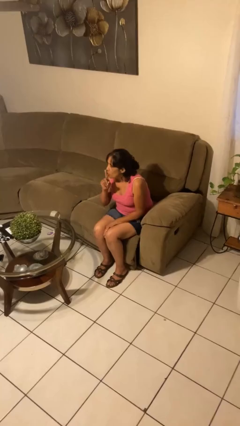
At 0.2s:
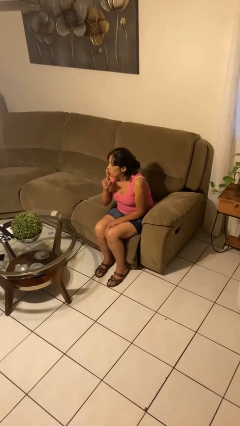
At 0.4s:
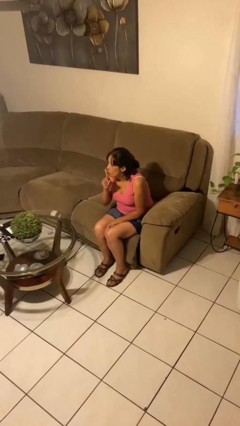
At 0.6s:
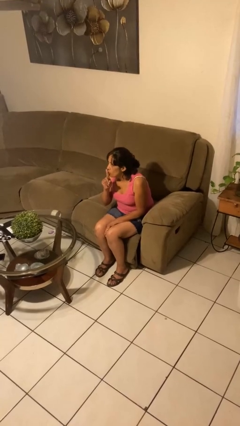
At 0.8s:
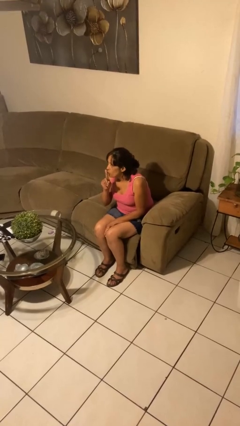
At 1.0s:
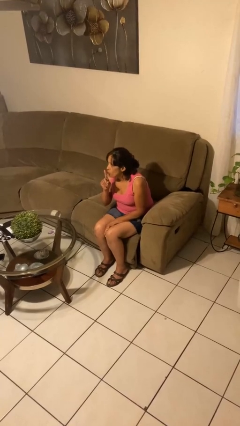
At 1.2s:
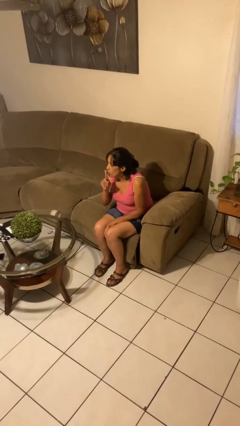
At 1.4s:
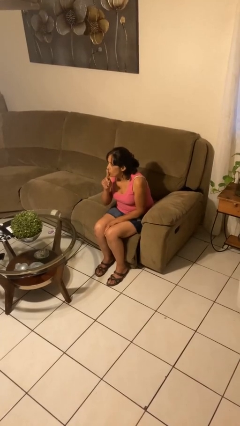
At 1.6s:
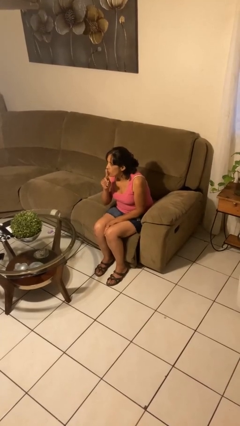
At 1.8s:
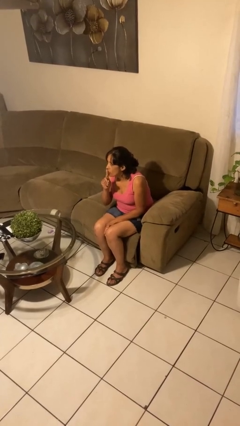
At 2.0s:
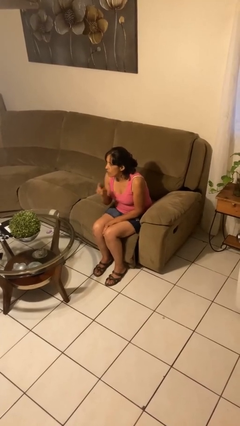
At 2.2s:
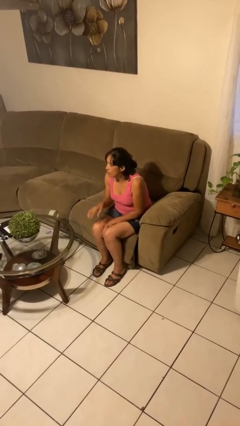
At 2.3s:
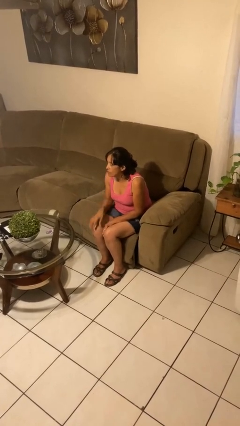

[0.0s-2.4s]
person gestures be quiet

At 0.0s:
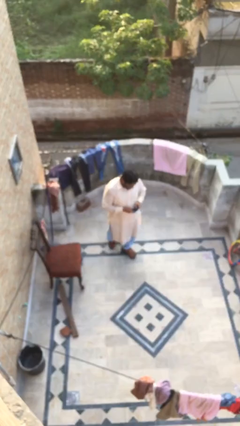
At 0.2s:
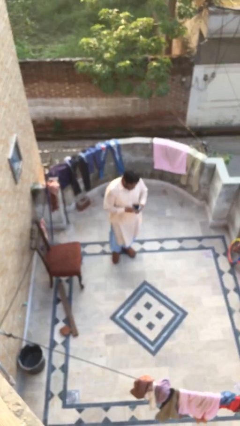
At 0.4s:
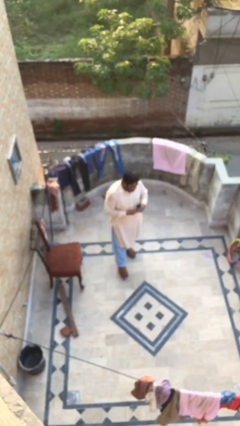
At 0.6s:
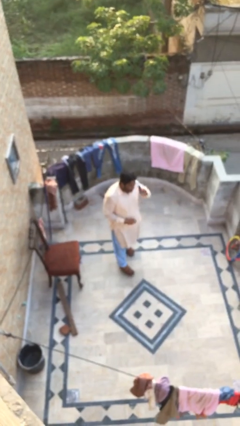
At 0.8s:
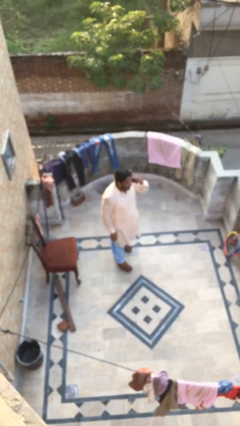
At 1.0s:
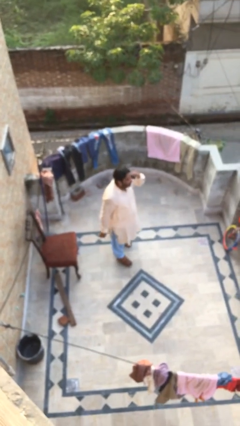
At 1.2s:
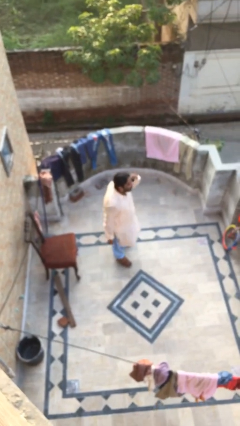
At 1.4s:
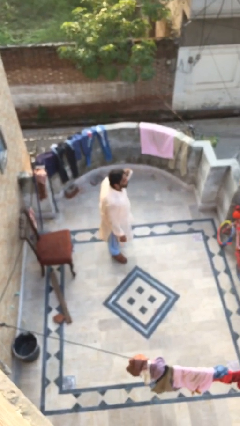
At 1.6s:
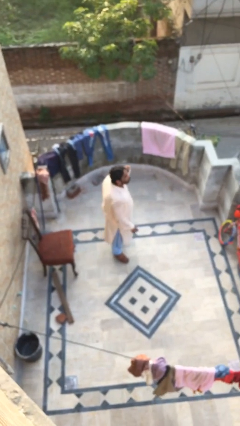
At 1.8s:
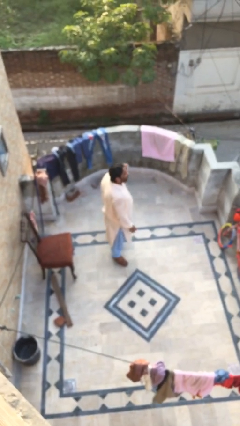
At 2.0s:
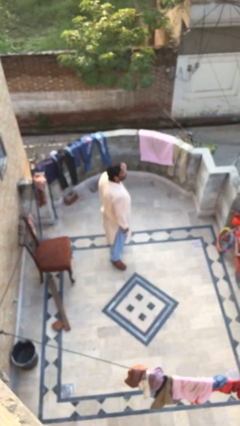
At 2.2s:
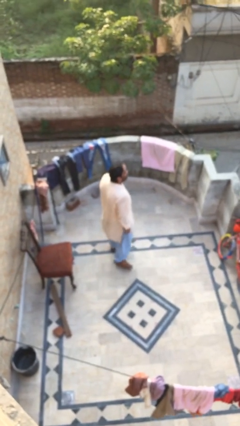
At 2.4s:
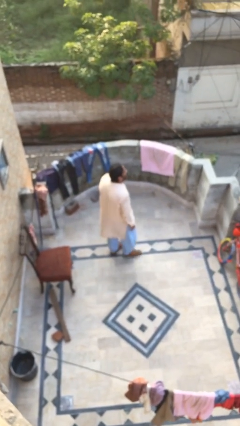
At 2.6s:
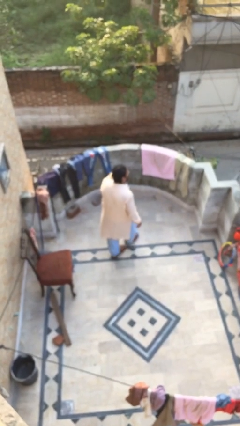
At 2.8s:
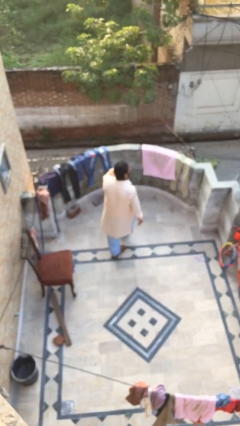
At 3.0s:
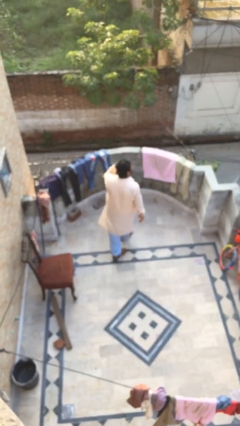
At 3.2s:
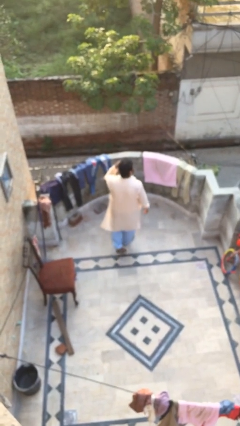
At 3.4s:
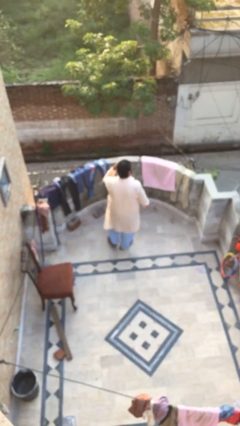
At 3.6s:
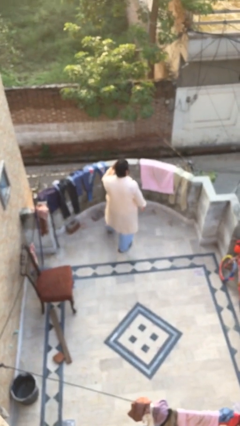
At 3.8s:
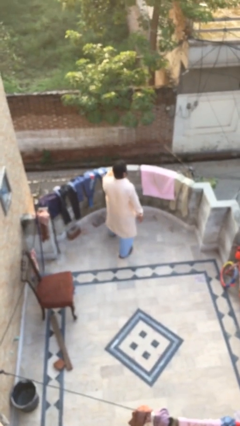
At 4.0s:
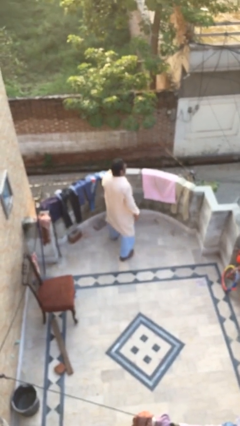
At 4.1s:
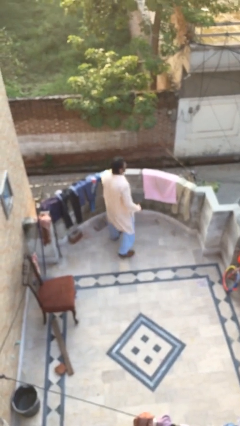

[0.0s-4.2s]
person talks on phone

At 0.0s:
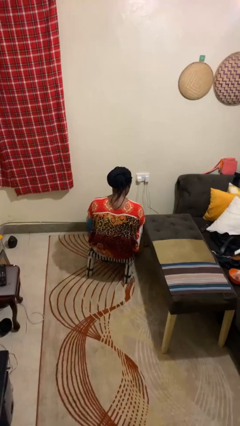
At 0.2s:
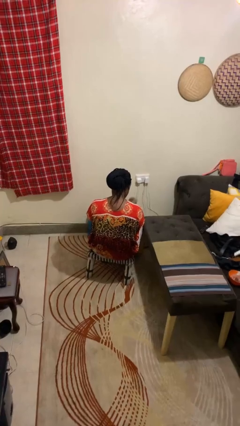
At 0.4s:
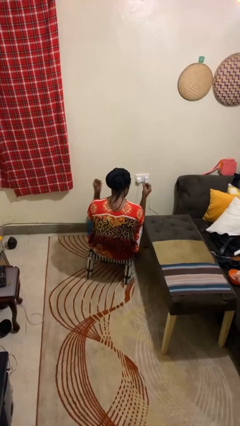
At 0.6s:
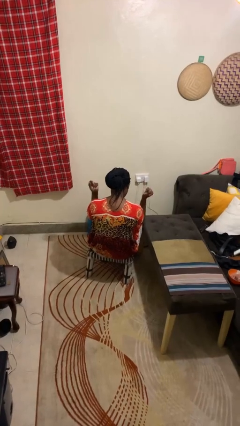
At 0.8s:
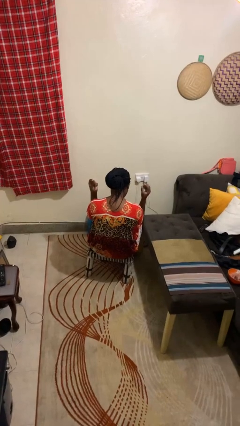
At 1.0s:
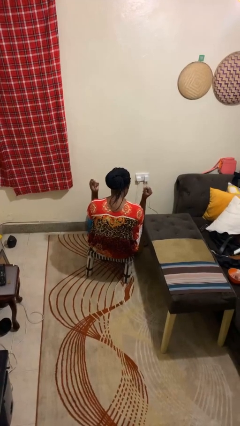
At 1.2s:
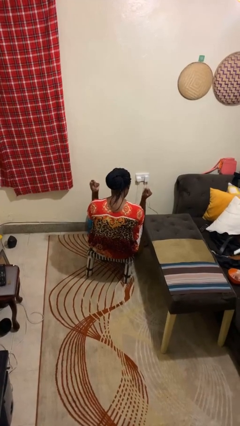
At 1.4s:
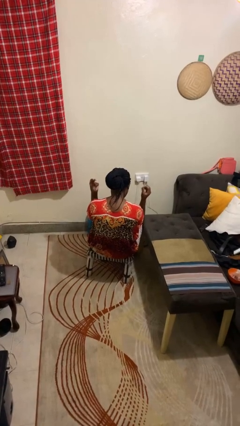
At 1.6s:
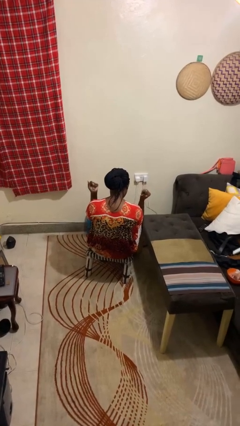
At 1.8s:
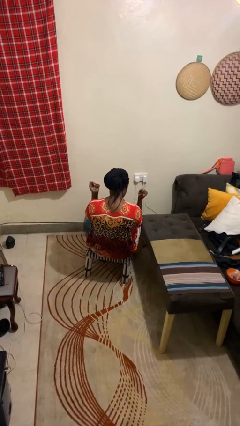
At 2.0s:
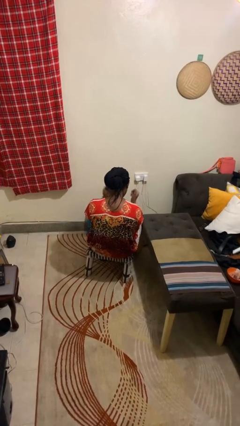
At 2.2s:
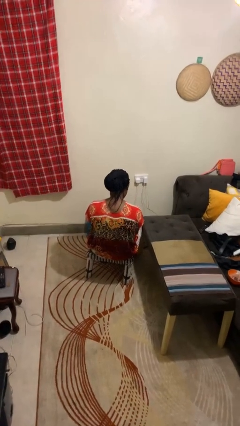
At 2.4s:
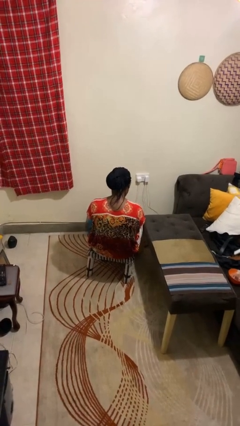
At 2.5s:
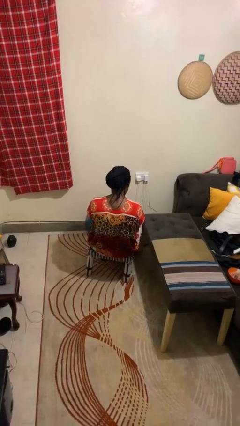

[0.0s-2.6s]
person snaps fingers

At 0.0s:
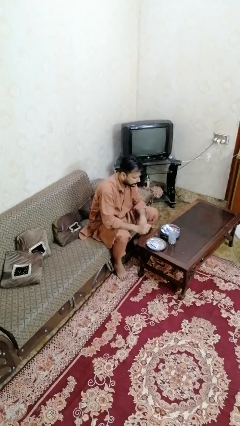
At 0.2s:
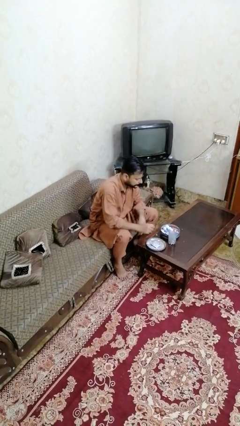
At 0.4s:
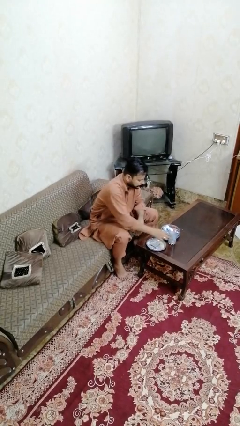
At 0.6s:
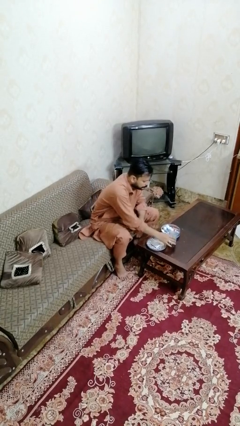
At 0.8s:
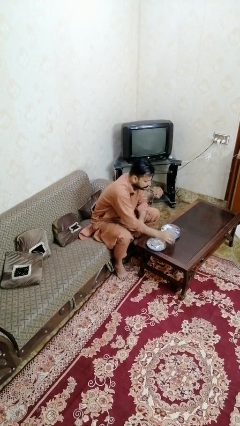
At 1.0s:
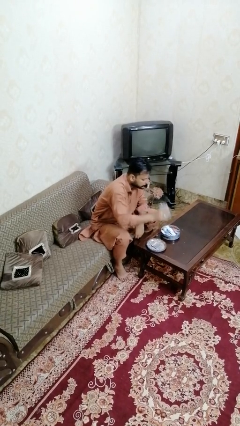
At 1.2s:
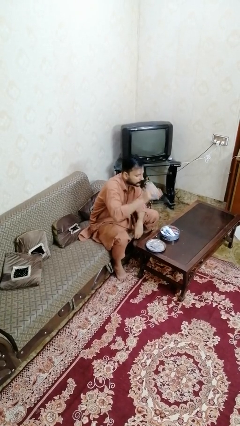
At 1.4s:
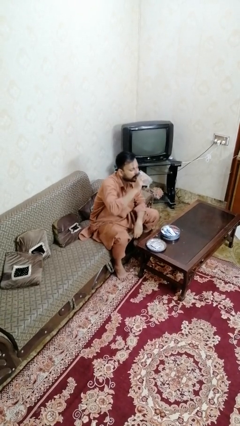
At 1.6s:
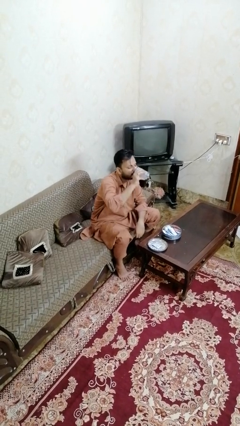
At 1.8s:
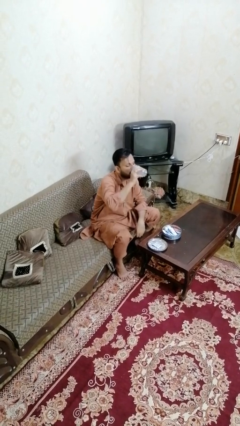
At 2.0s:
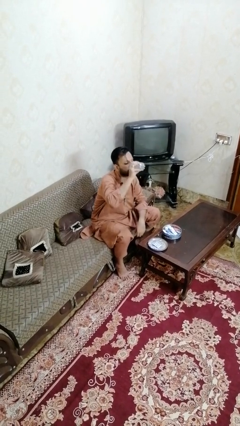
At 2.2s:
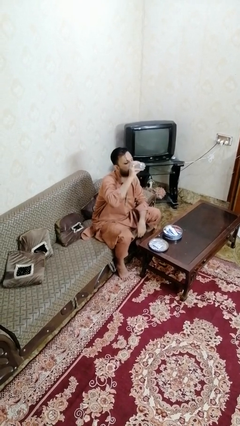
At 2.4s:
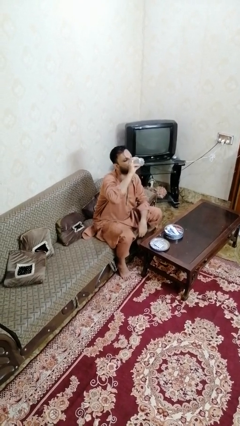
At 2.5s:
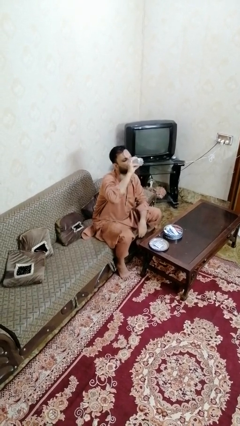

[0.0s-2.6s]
person drinks from cup

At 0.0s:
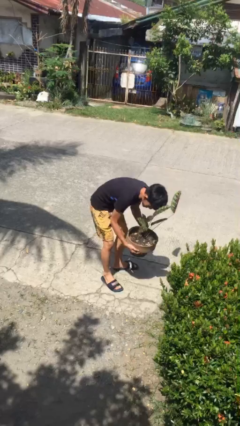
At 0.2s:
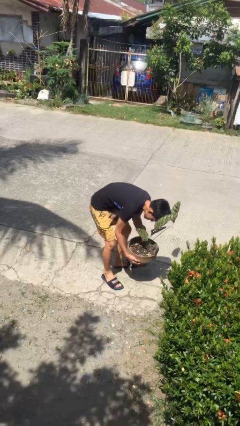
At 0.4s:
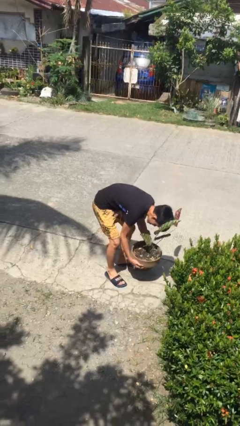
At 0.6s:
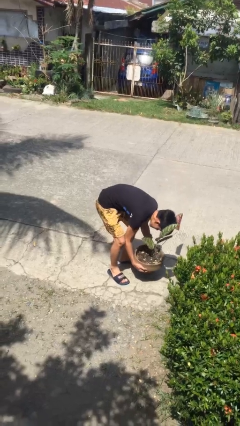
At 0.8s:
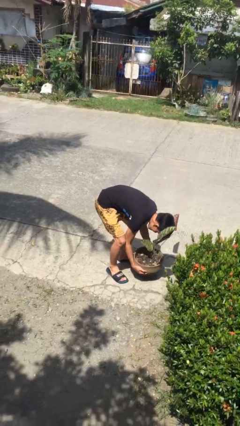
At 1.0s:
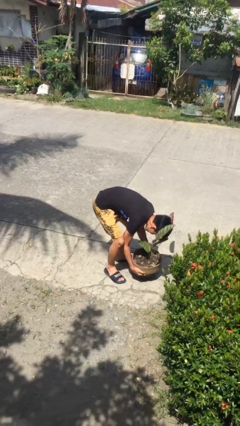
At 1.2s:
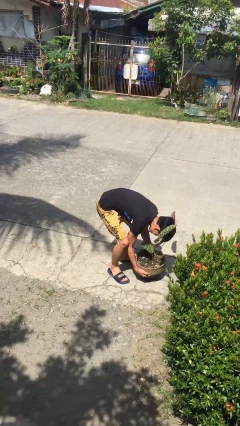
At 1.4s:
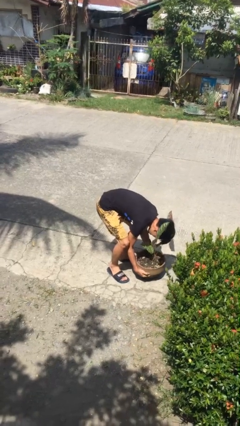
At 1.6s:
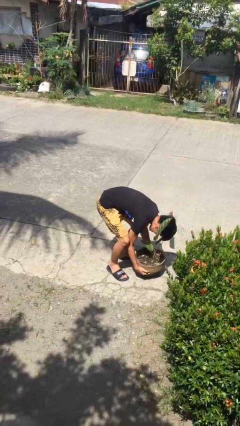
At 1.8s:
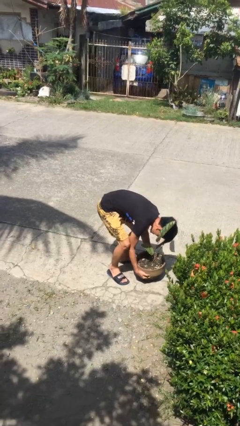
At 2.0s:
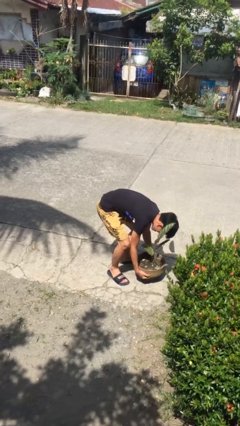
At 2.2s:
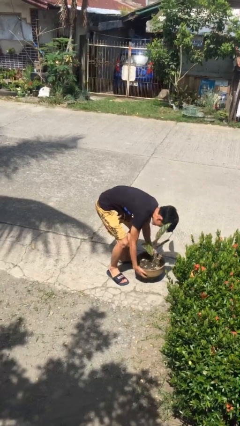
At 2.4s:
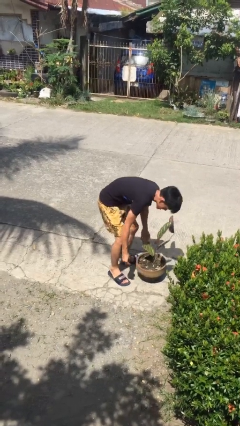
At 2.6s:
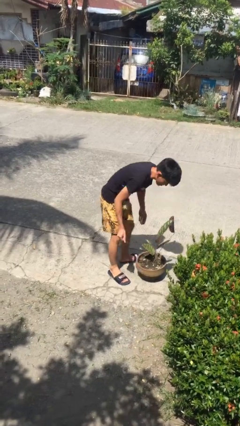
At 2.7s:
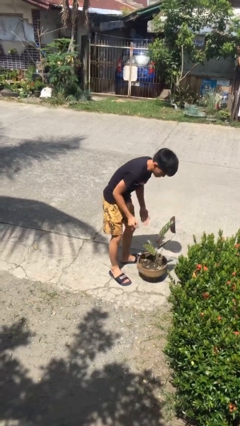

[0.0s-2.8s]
person puts down object on floor

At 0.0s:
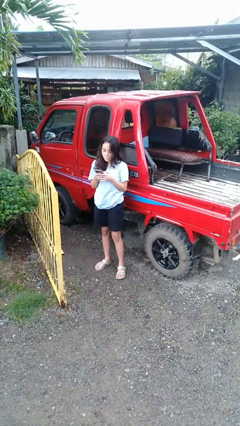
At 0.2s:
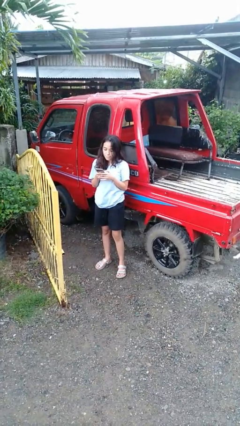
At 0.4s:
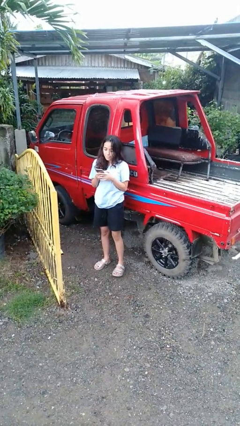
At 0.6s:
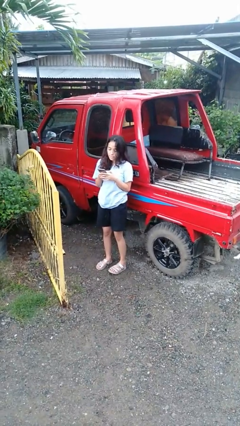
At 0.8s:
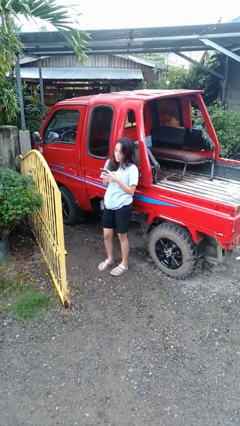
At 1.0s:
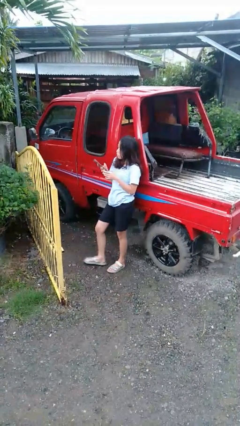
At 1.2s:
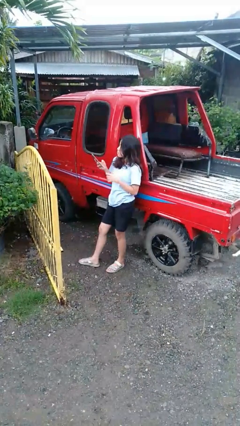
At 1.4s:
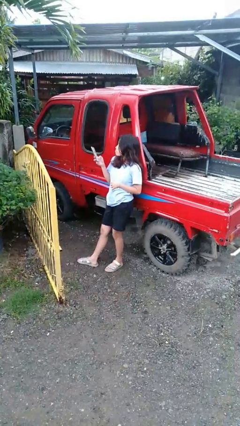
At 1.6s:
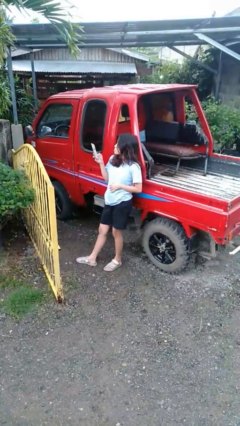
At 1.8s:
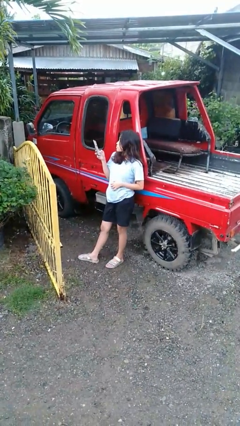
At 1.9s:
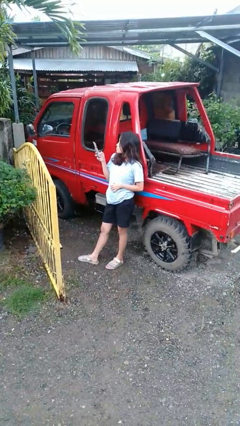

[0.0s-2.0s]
person leans against car

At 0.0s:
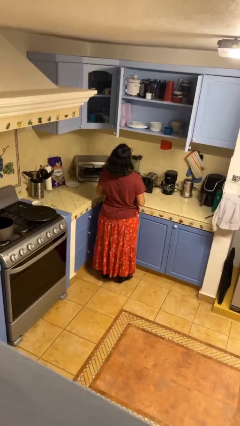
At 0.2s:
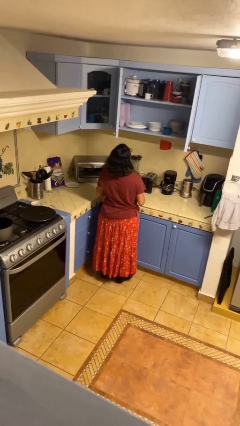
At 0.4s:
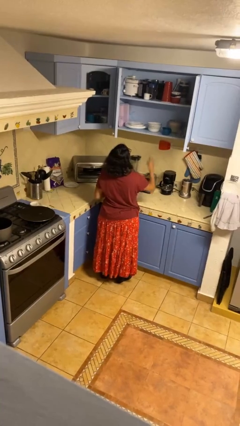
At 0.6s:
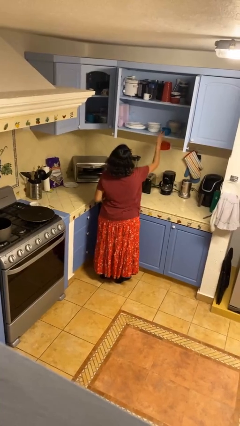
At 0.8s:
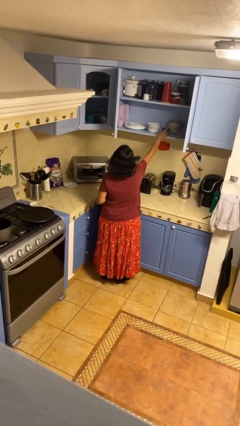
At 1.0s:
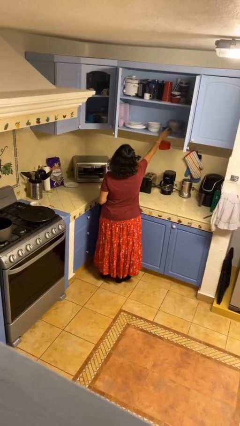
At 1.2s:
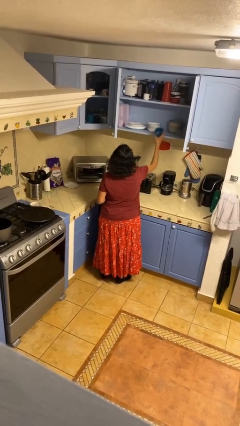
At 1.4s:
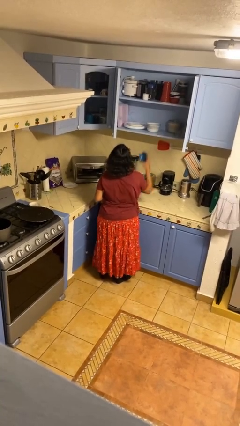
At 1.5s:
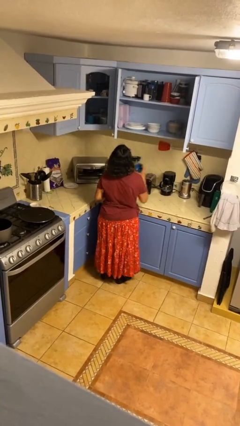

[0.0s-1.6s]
person picks up object from cabinet
